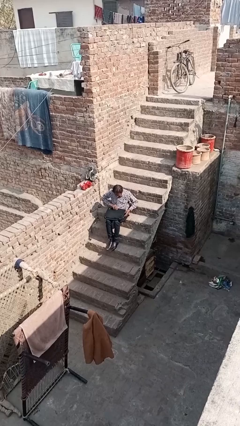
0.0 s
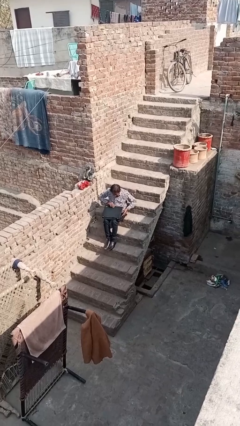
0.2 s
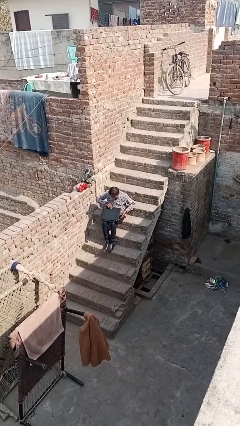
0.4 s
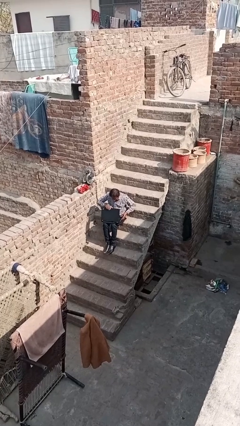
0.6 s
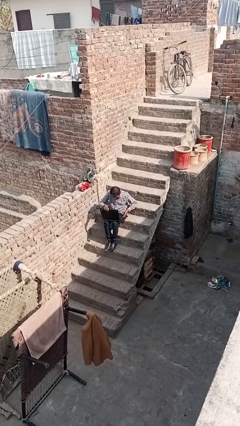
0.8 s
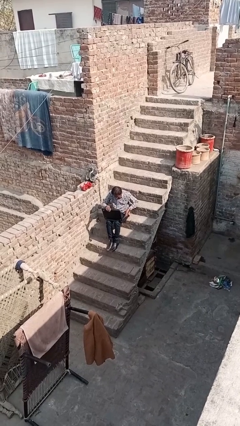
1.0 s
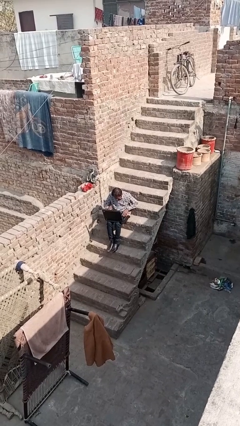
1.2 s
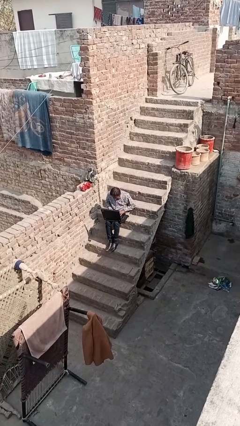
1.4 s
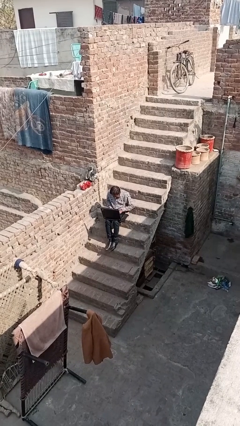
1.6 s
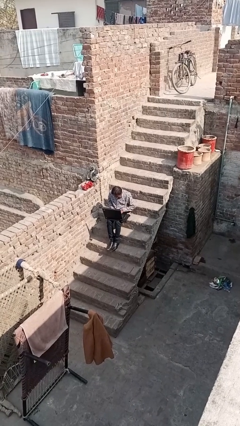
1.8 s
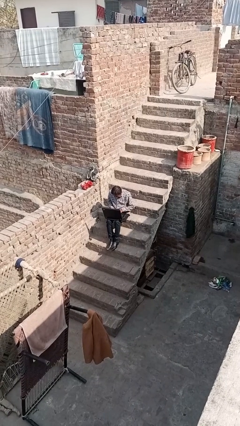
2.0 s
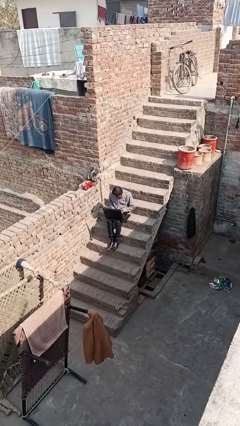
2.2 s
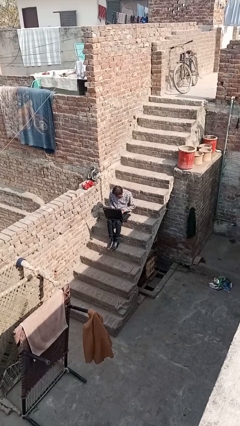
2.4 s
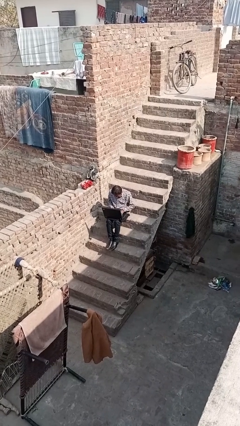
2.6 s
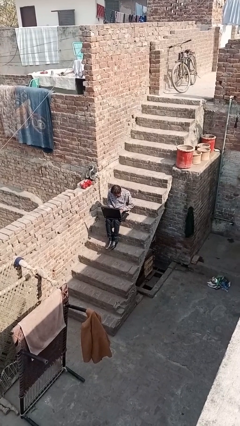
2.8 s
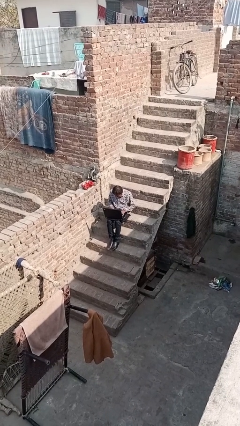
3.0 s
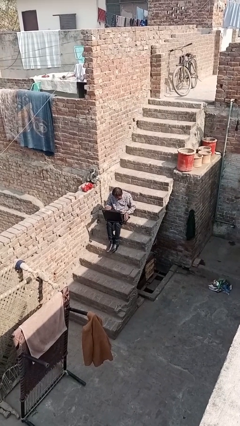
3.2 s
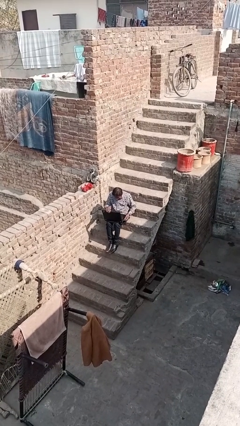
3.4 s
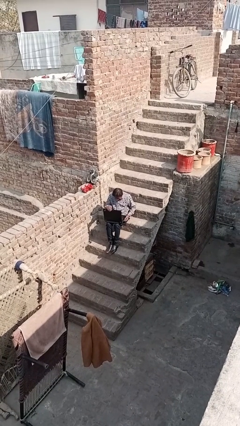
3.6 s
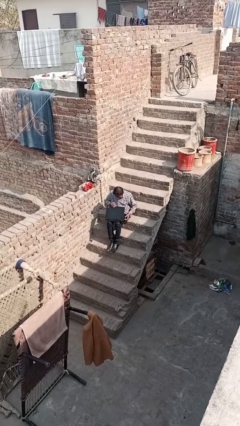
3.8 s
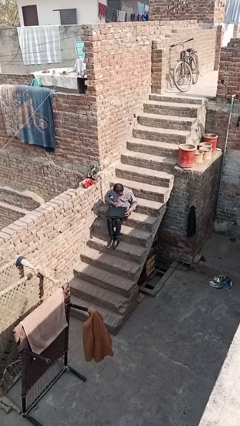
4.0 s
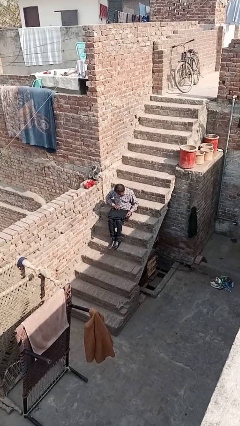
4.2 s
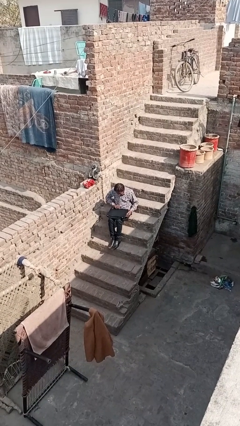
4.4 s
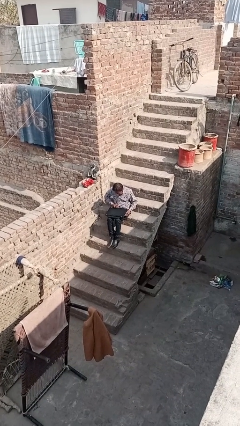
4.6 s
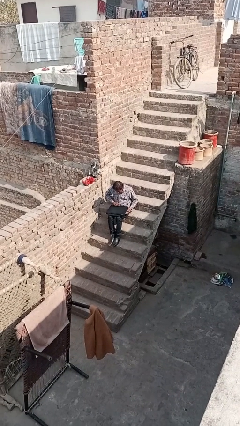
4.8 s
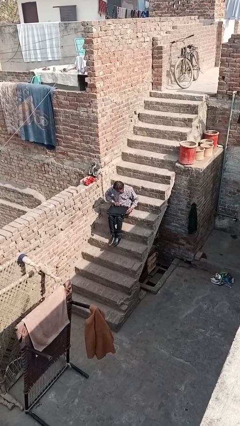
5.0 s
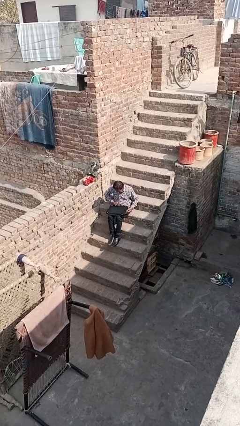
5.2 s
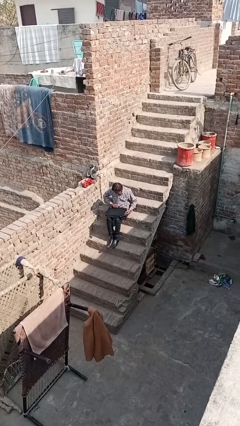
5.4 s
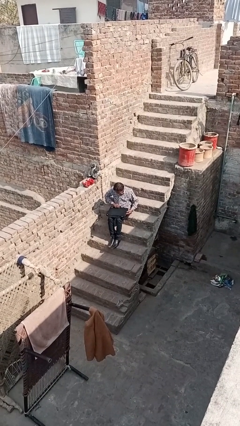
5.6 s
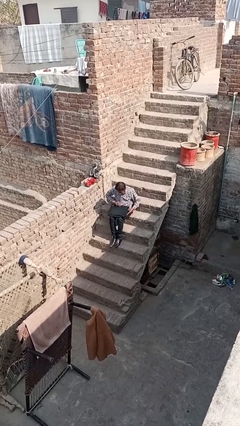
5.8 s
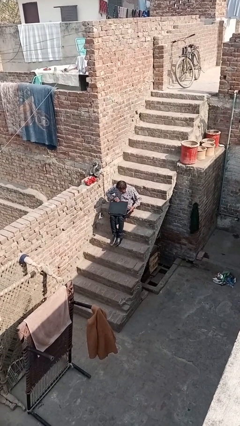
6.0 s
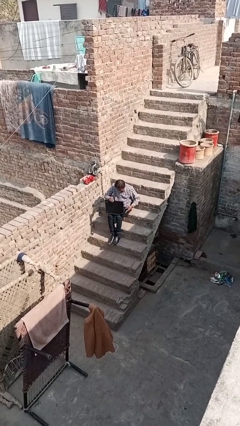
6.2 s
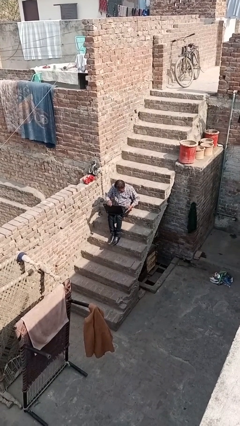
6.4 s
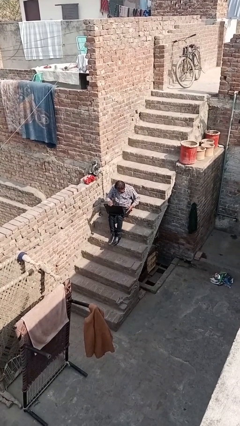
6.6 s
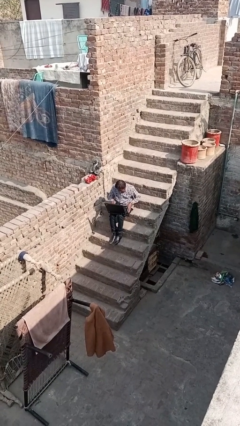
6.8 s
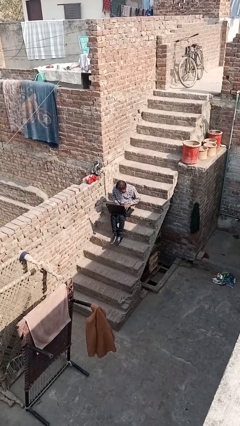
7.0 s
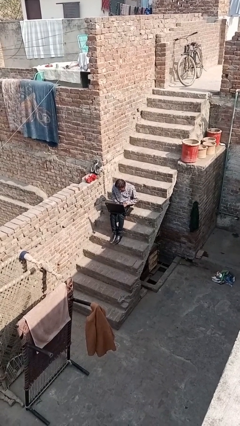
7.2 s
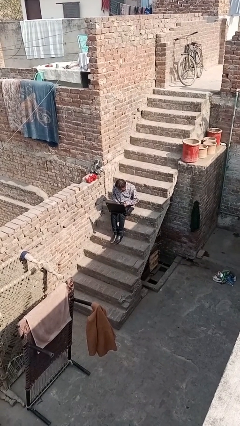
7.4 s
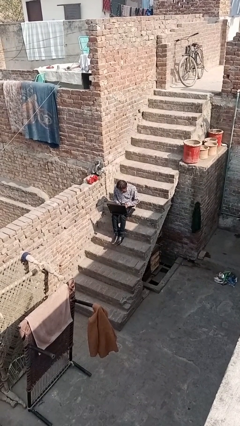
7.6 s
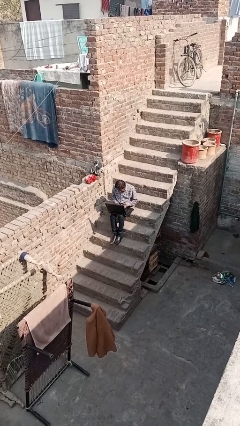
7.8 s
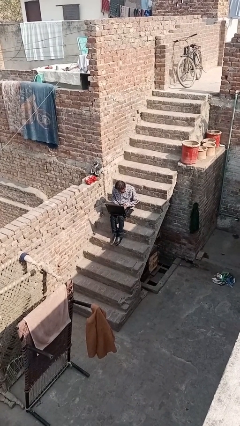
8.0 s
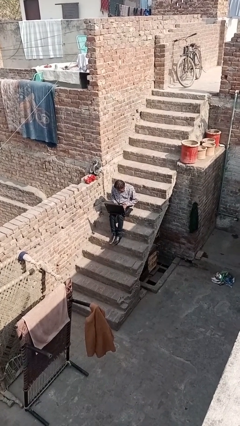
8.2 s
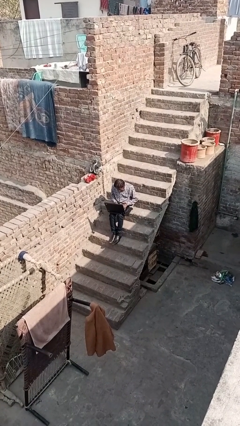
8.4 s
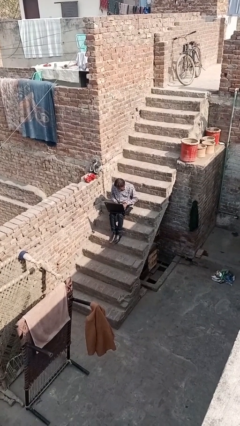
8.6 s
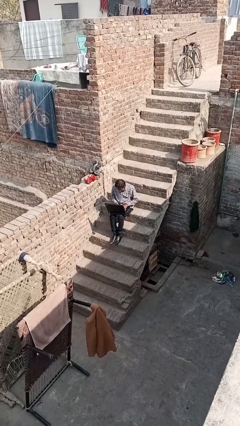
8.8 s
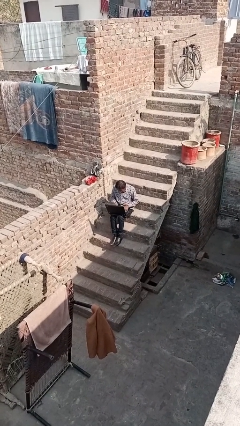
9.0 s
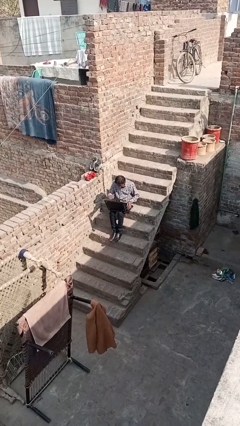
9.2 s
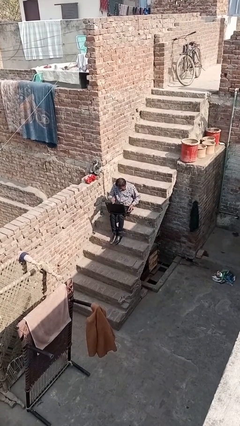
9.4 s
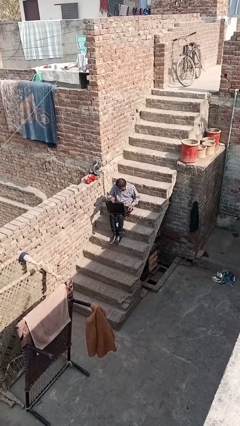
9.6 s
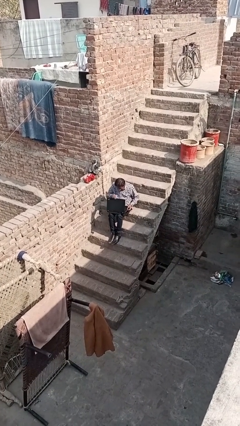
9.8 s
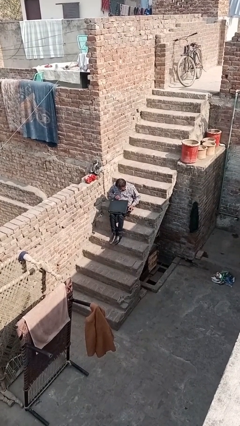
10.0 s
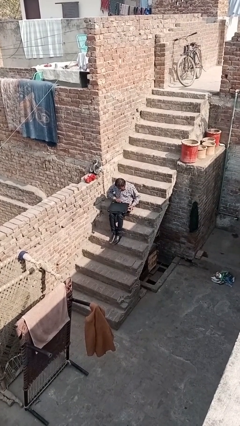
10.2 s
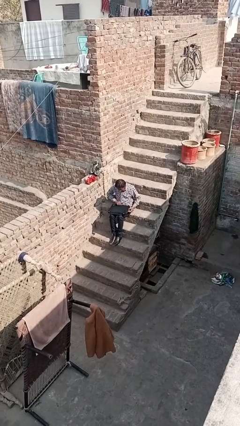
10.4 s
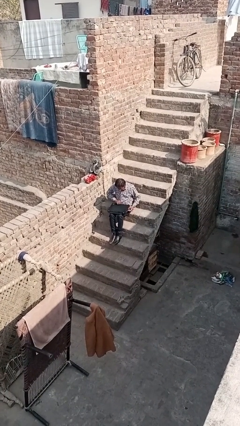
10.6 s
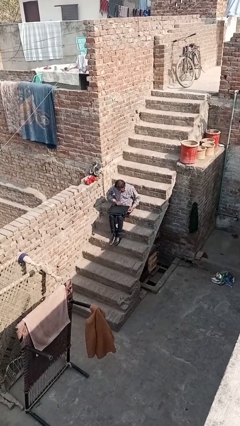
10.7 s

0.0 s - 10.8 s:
person interacts with laptop

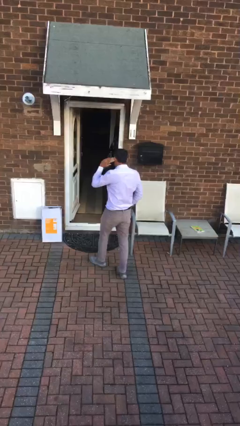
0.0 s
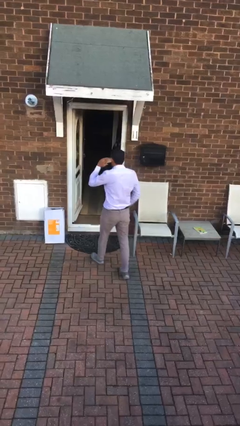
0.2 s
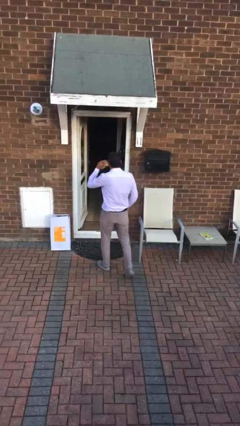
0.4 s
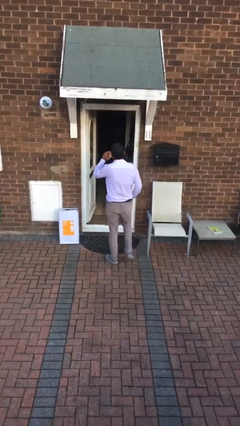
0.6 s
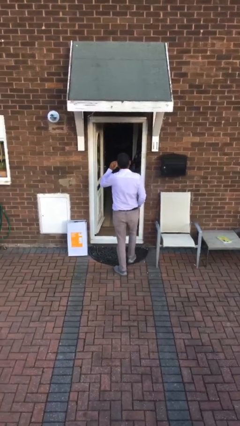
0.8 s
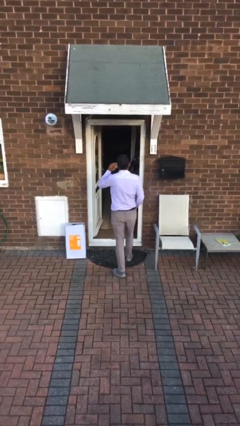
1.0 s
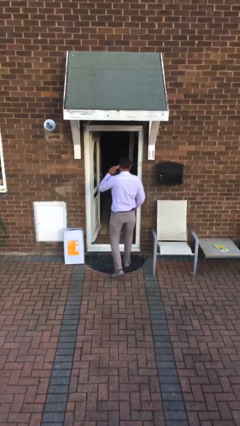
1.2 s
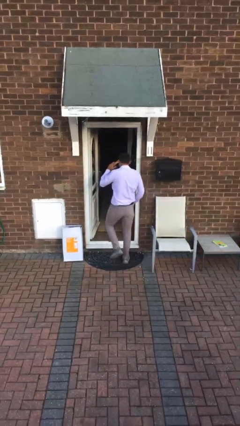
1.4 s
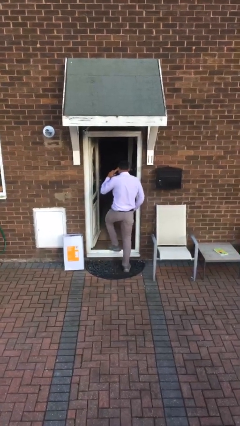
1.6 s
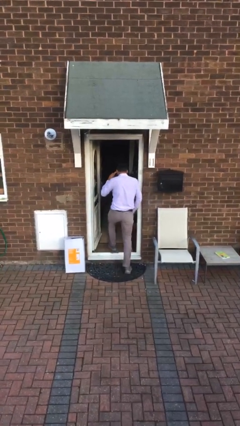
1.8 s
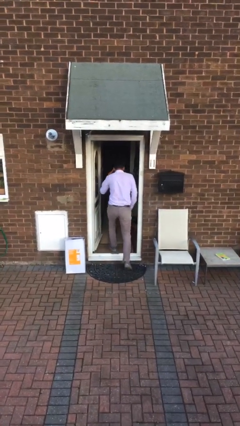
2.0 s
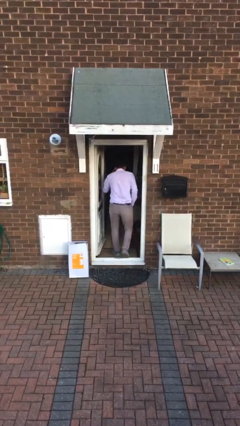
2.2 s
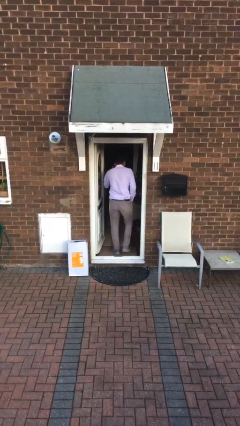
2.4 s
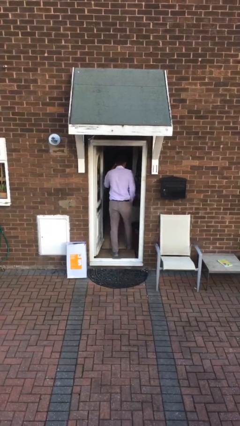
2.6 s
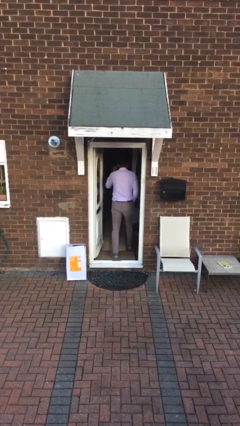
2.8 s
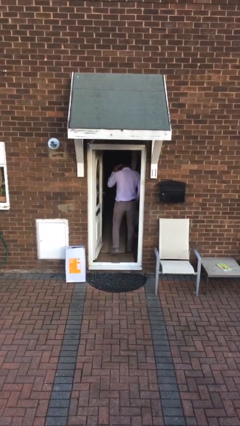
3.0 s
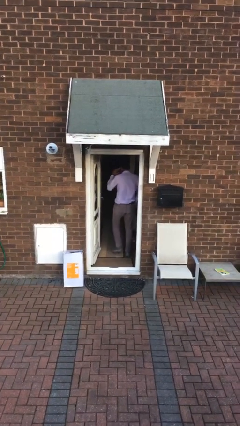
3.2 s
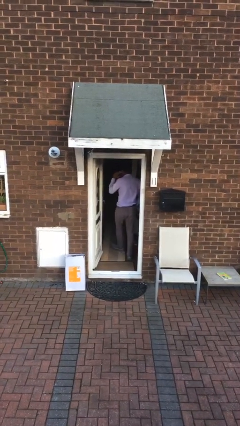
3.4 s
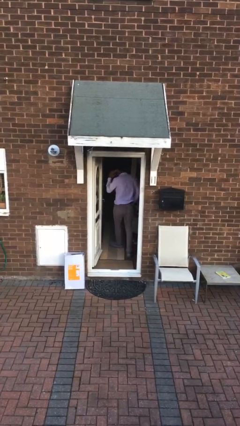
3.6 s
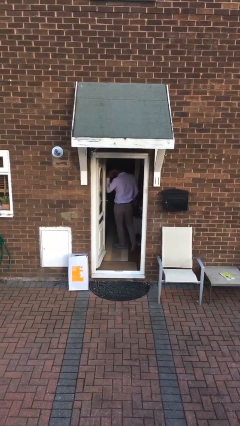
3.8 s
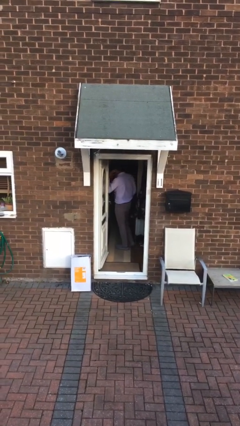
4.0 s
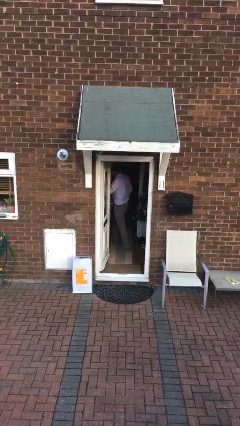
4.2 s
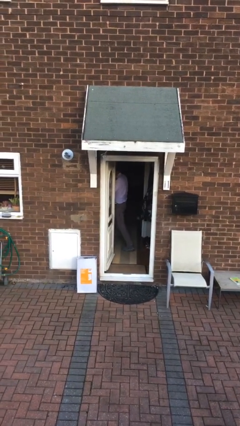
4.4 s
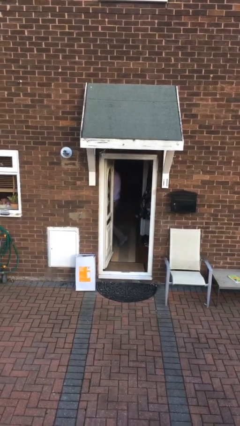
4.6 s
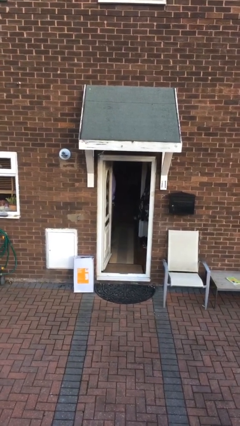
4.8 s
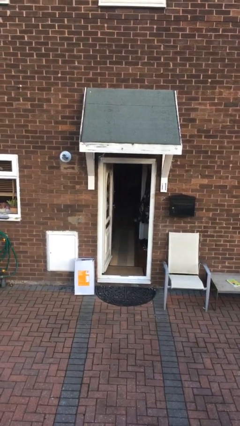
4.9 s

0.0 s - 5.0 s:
person exits scene through structure

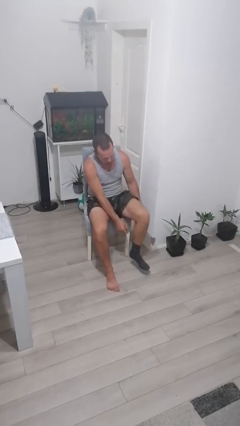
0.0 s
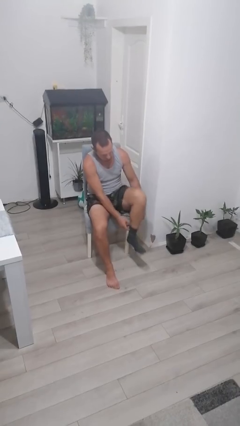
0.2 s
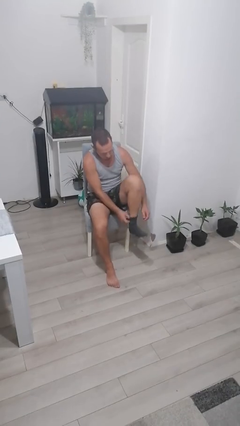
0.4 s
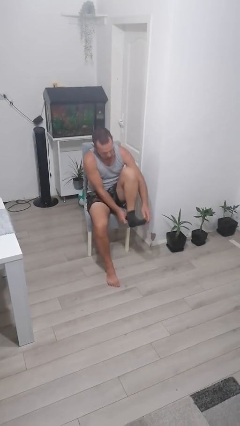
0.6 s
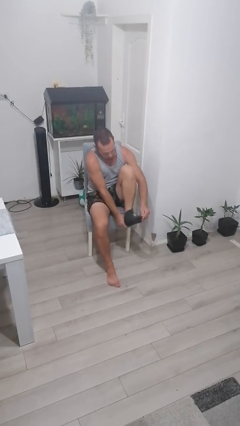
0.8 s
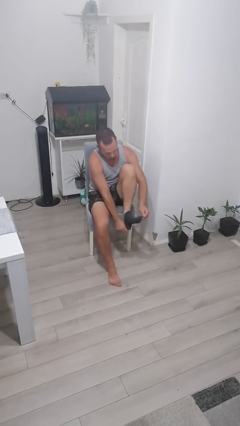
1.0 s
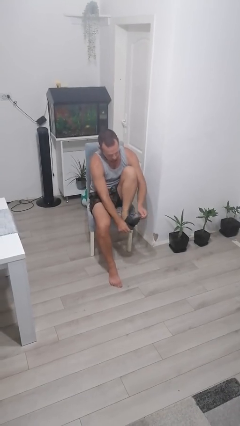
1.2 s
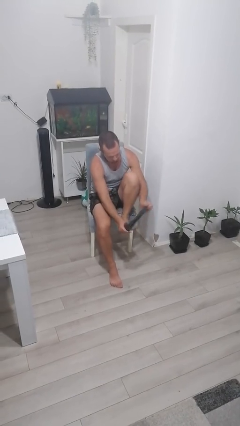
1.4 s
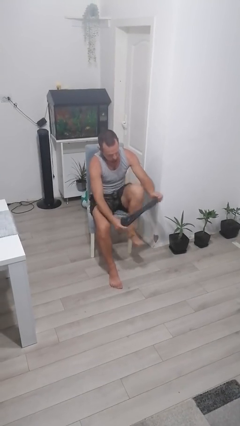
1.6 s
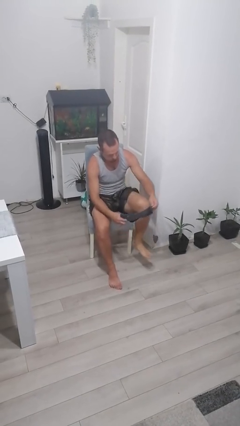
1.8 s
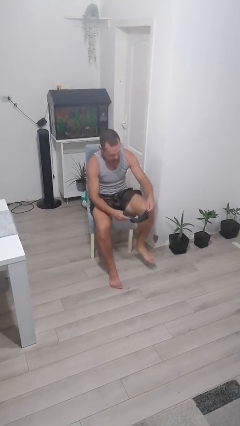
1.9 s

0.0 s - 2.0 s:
person takes off socks

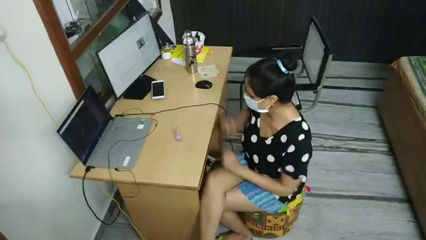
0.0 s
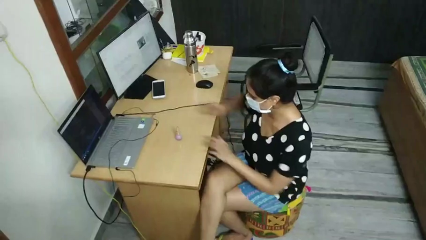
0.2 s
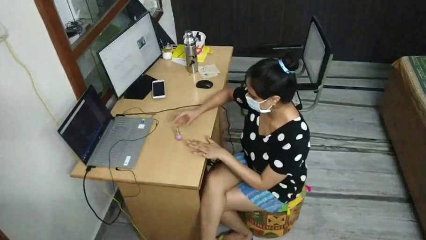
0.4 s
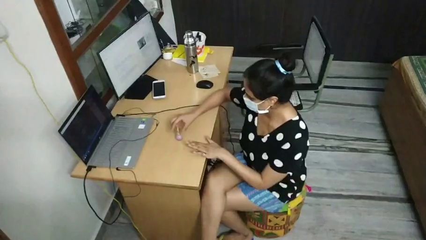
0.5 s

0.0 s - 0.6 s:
person paints fingernails
